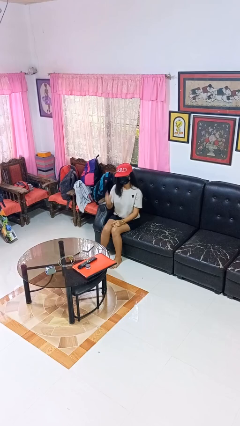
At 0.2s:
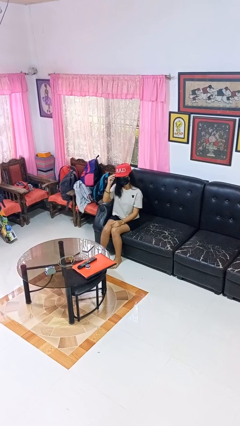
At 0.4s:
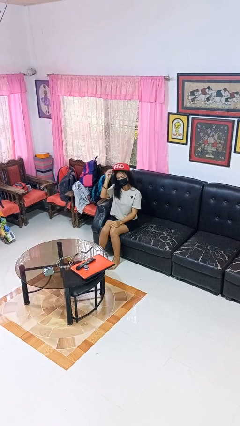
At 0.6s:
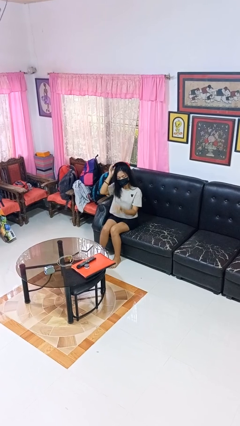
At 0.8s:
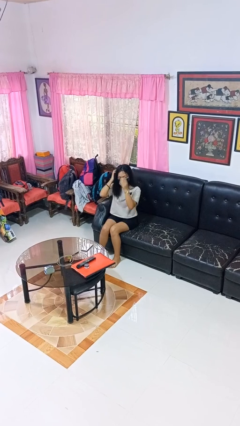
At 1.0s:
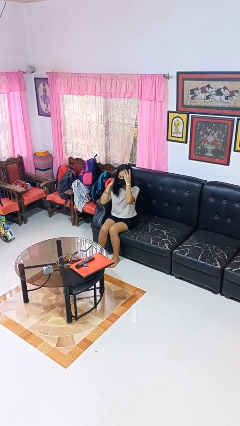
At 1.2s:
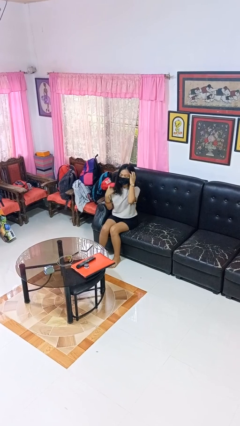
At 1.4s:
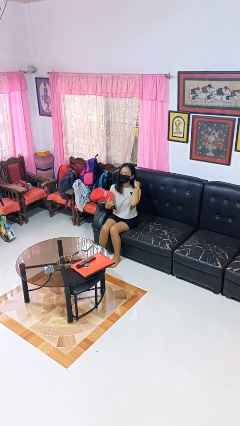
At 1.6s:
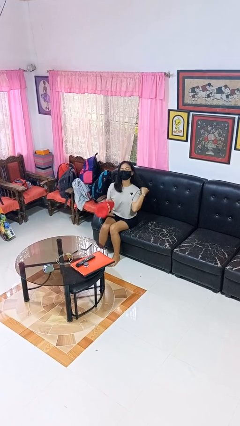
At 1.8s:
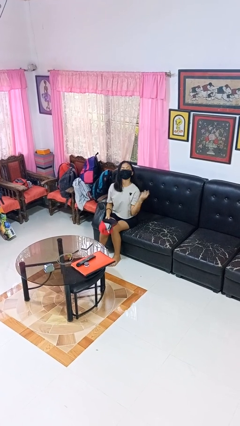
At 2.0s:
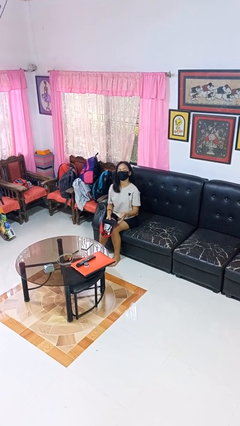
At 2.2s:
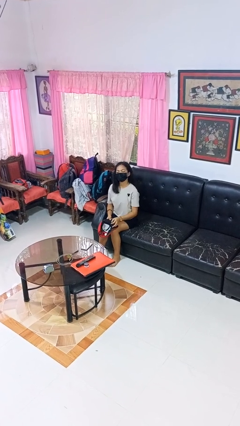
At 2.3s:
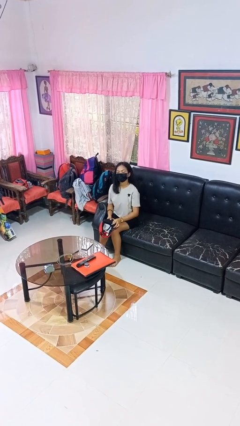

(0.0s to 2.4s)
person takes off hat

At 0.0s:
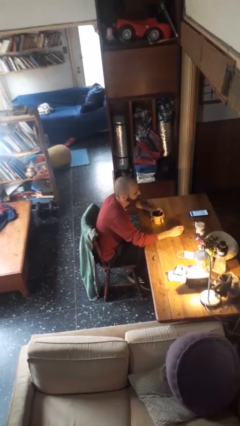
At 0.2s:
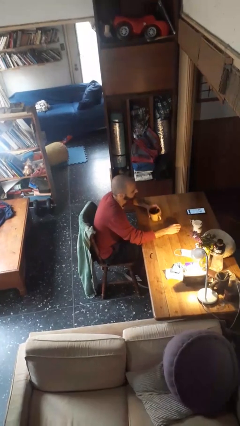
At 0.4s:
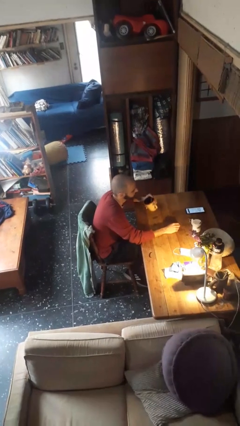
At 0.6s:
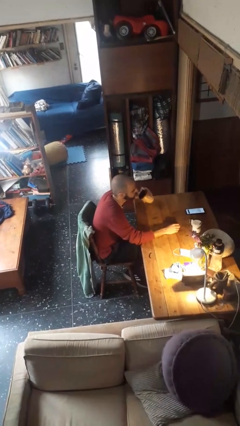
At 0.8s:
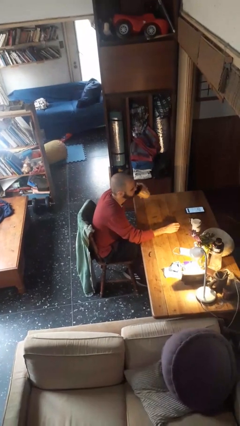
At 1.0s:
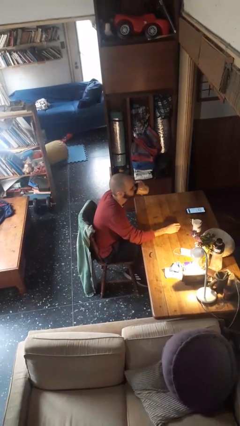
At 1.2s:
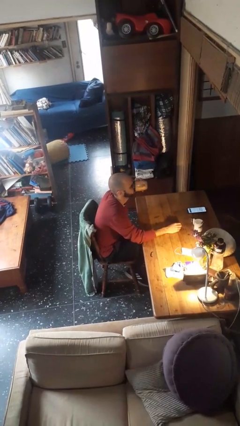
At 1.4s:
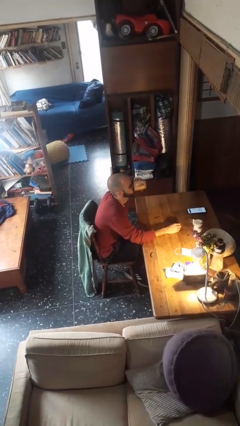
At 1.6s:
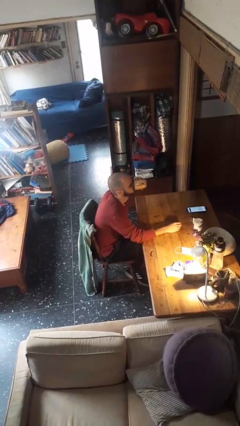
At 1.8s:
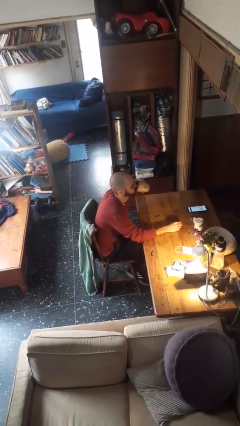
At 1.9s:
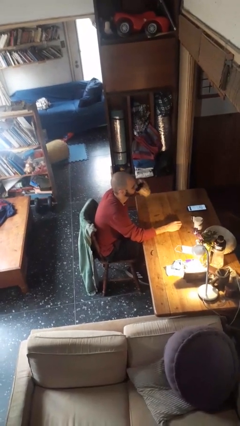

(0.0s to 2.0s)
person drinks from mug

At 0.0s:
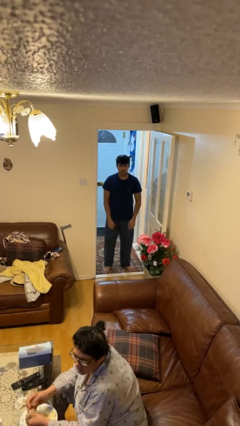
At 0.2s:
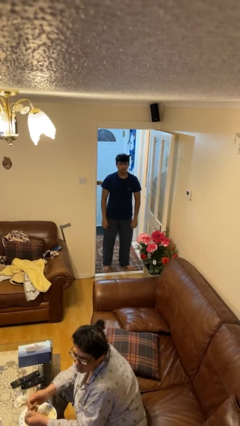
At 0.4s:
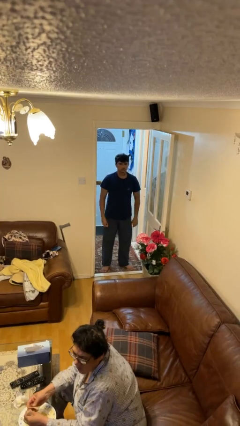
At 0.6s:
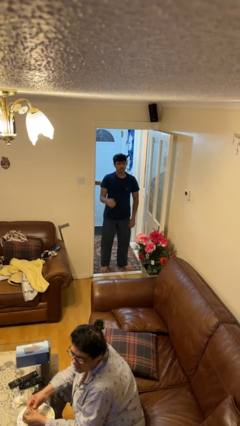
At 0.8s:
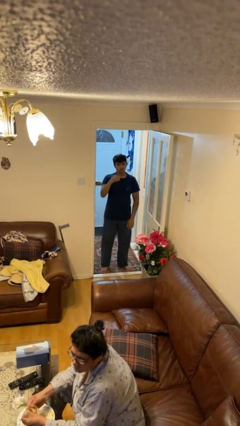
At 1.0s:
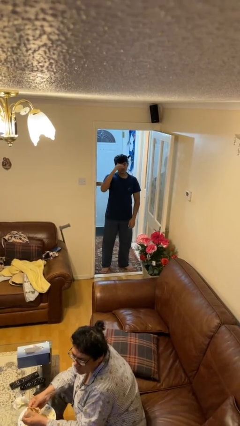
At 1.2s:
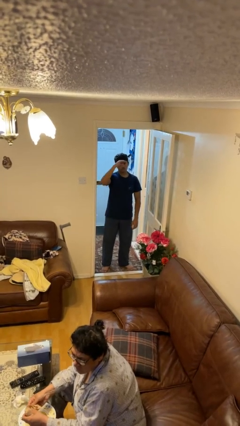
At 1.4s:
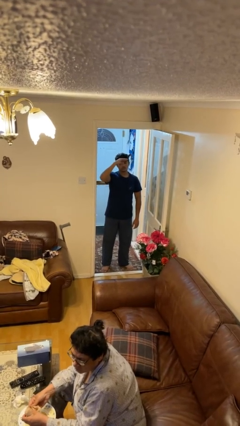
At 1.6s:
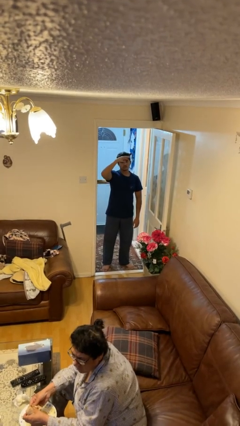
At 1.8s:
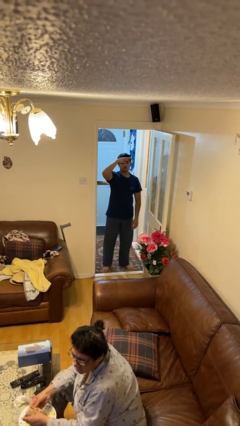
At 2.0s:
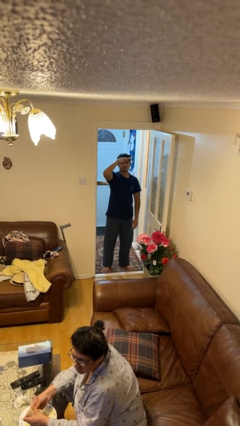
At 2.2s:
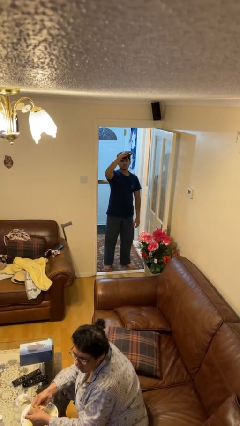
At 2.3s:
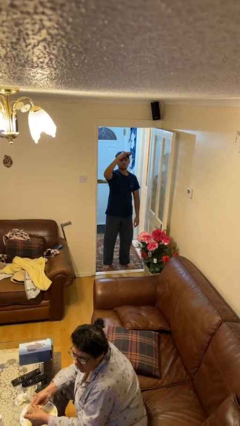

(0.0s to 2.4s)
person salutes

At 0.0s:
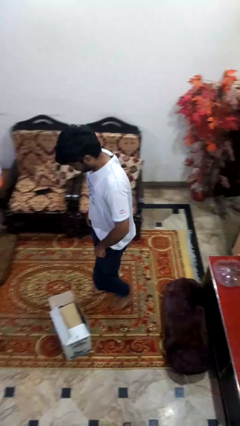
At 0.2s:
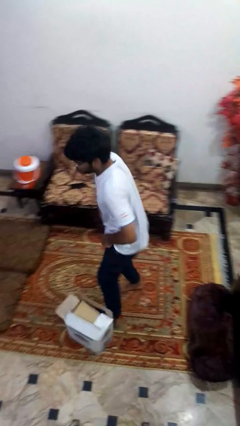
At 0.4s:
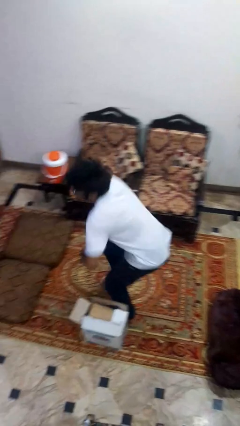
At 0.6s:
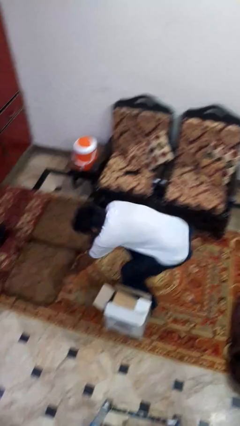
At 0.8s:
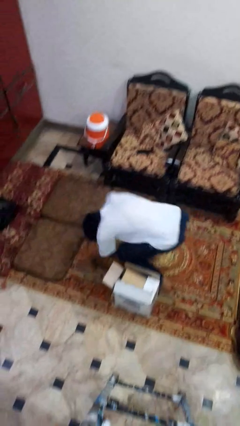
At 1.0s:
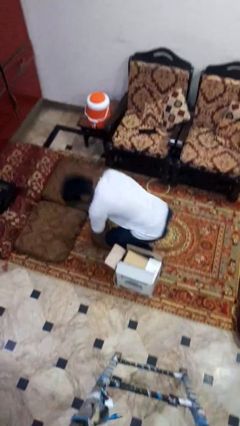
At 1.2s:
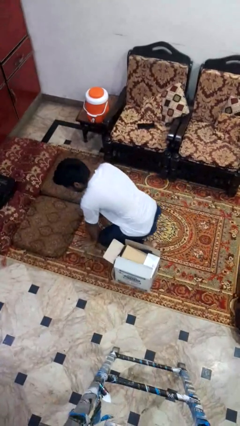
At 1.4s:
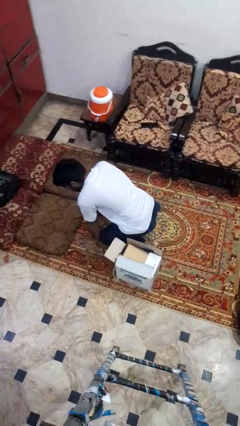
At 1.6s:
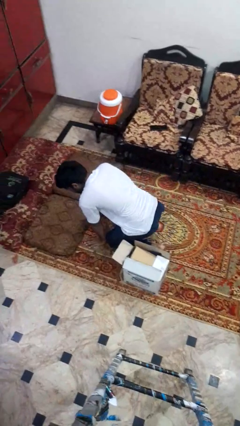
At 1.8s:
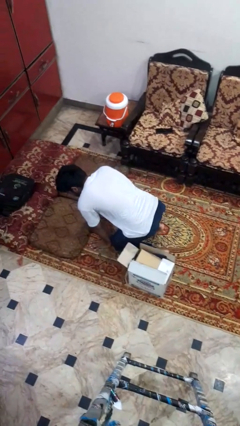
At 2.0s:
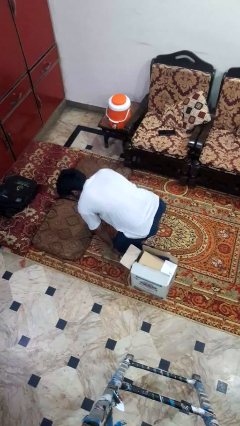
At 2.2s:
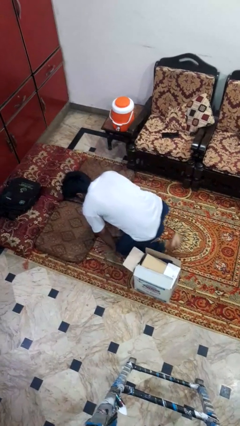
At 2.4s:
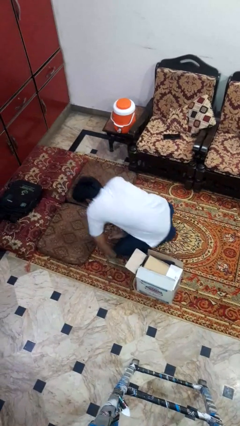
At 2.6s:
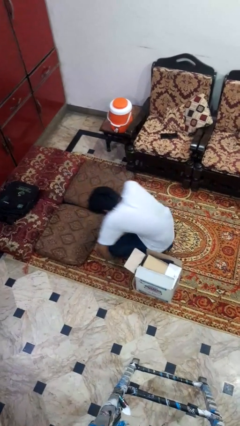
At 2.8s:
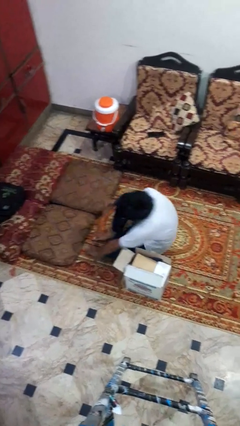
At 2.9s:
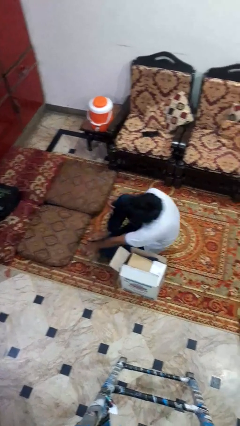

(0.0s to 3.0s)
person trips on object on floor

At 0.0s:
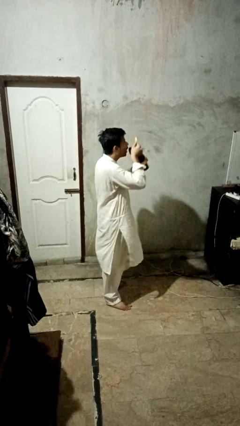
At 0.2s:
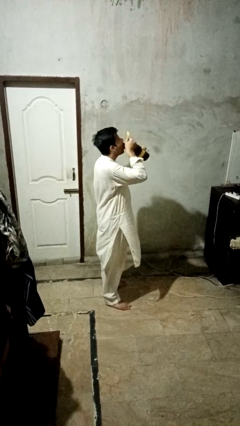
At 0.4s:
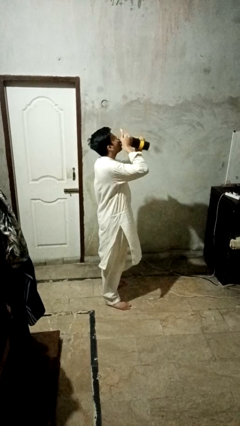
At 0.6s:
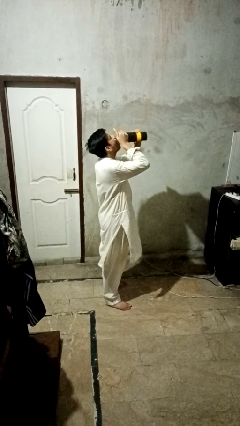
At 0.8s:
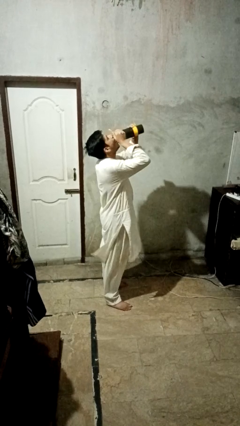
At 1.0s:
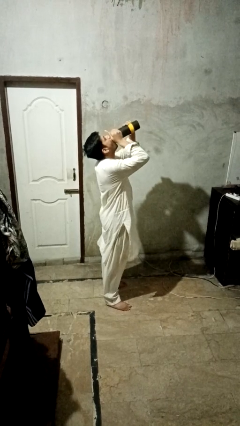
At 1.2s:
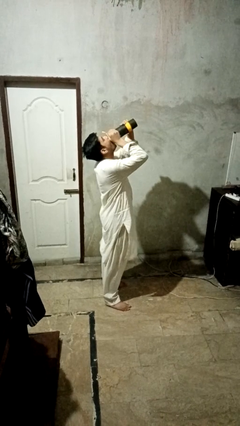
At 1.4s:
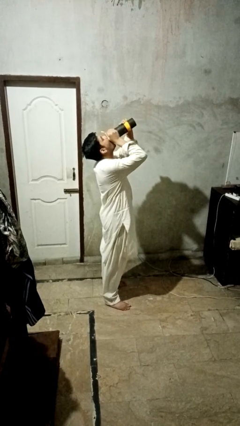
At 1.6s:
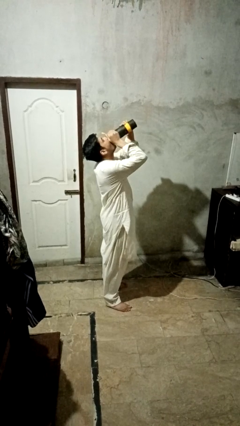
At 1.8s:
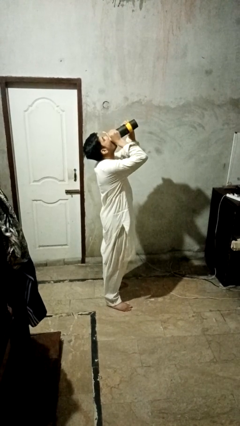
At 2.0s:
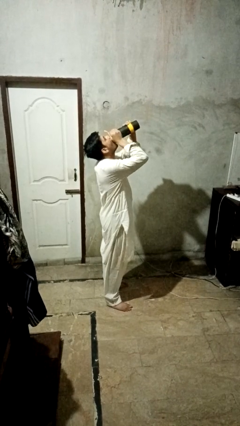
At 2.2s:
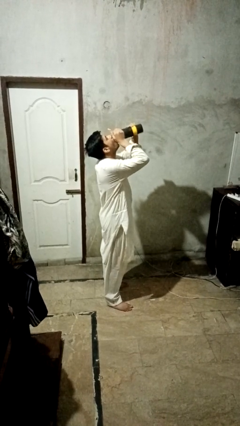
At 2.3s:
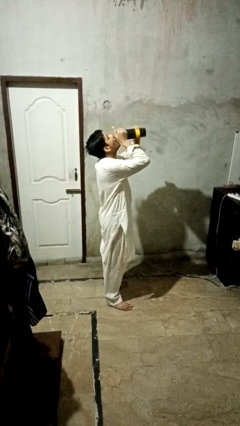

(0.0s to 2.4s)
person drinks from bottle

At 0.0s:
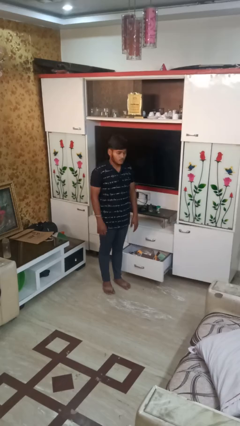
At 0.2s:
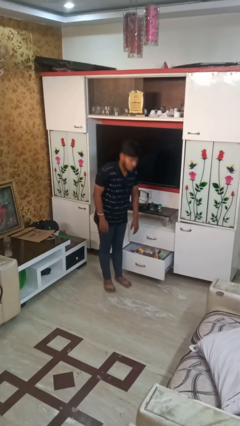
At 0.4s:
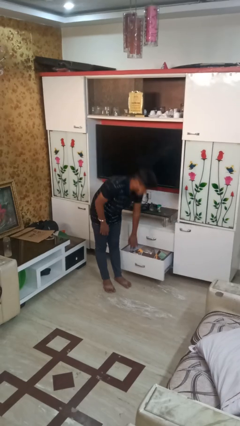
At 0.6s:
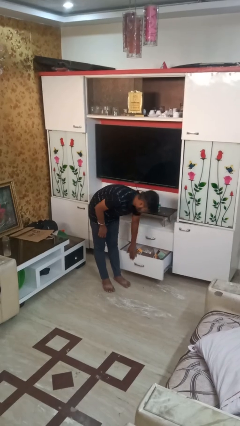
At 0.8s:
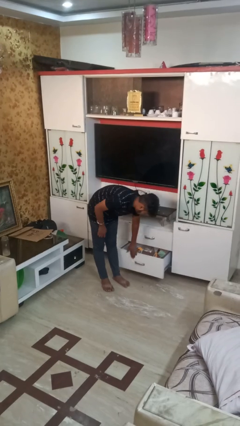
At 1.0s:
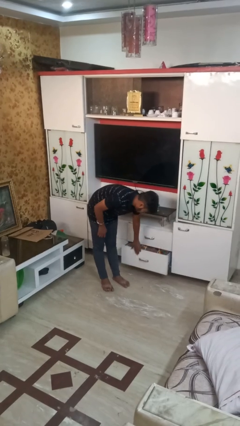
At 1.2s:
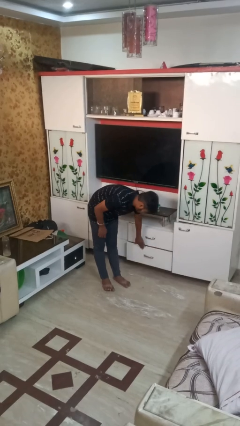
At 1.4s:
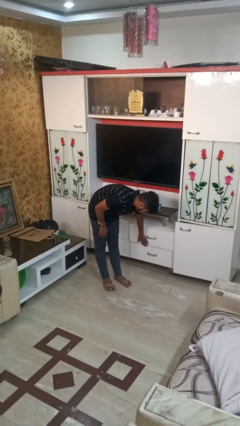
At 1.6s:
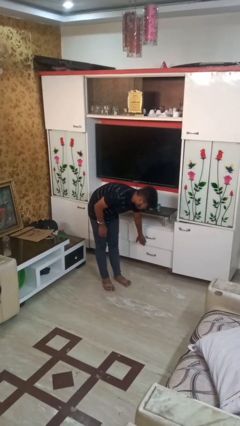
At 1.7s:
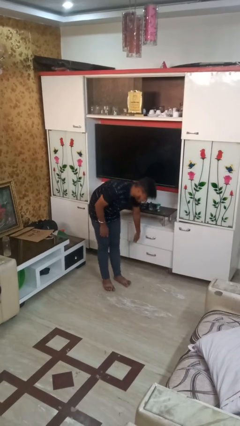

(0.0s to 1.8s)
person closes dresser drawer

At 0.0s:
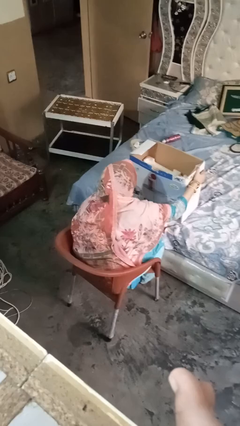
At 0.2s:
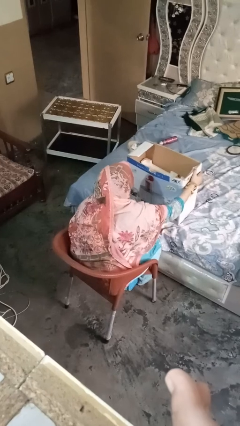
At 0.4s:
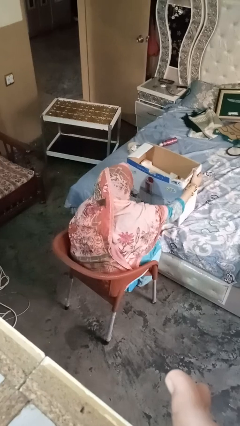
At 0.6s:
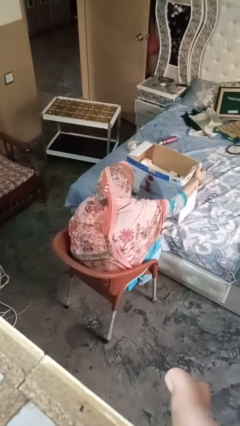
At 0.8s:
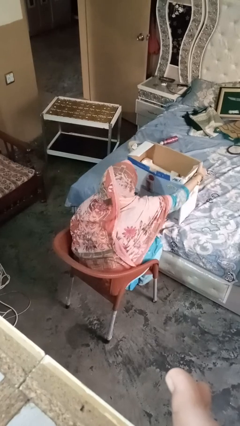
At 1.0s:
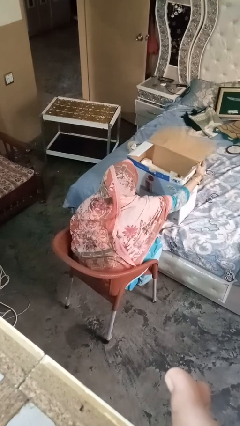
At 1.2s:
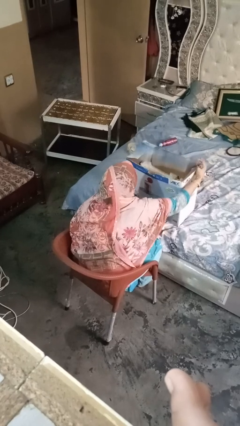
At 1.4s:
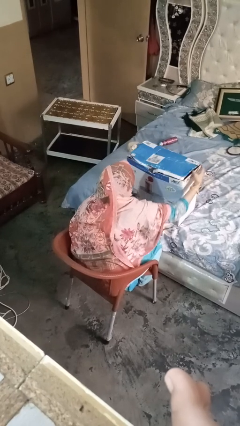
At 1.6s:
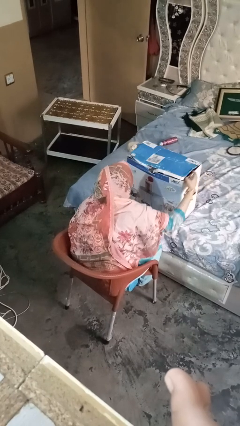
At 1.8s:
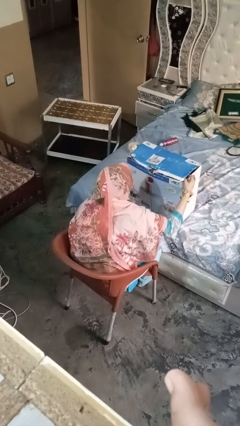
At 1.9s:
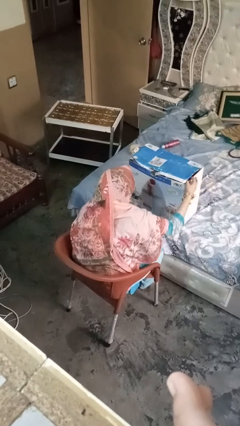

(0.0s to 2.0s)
person closes box

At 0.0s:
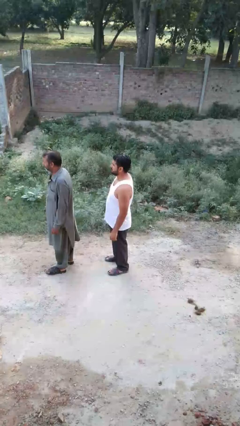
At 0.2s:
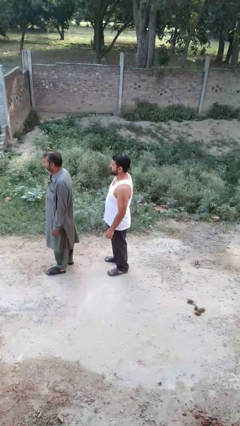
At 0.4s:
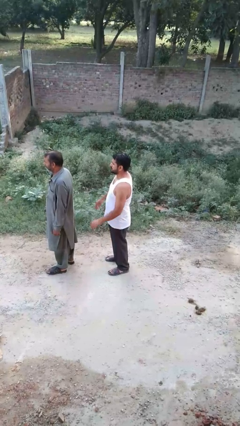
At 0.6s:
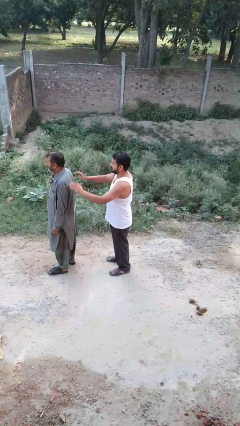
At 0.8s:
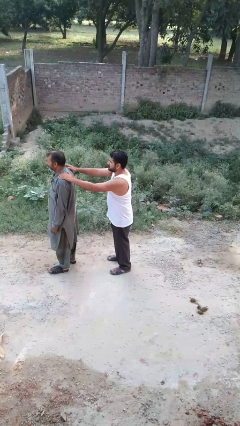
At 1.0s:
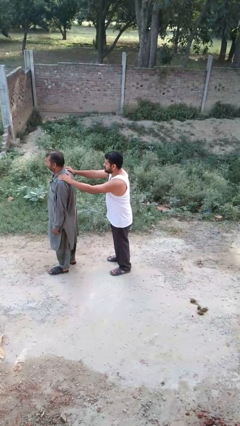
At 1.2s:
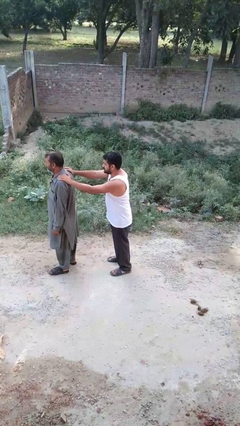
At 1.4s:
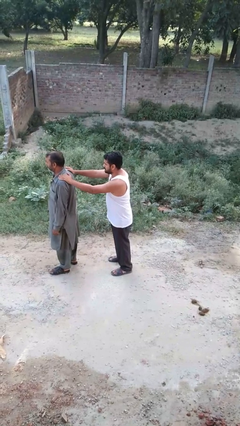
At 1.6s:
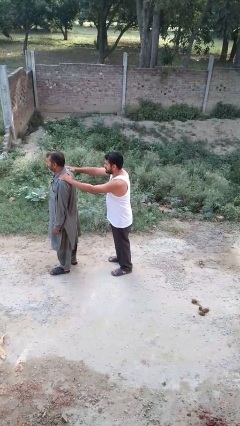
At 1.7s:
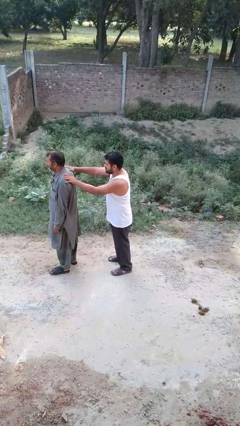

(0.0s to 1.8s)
person grabs person by shoulder
